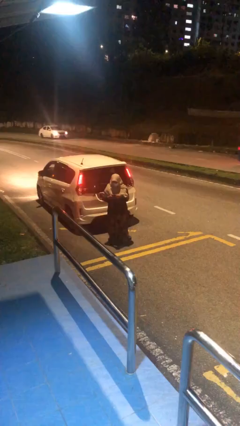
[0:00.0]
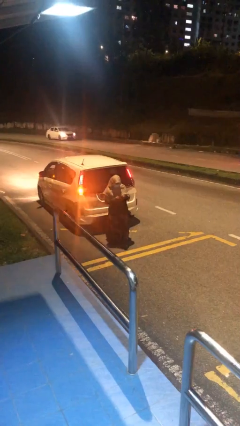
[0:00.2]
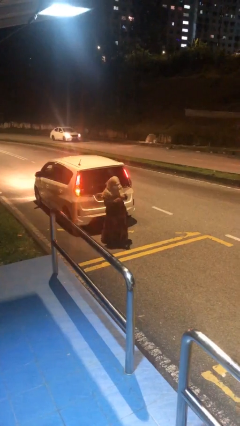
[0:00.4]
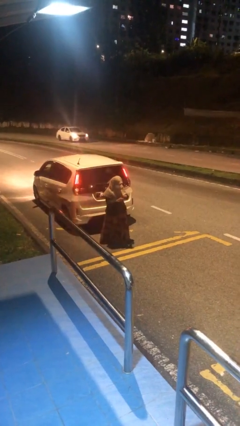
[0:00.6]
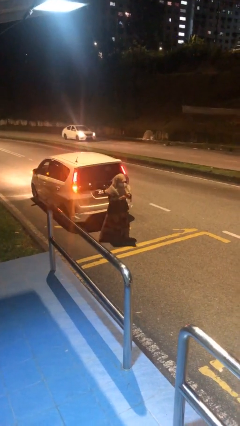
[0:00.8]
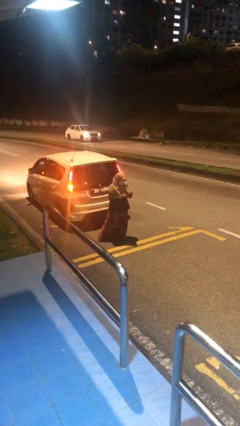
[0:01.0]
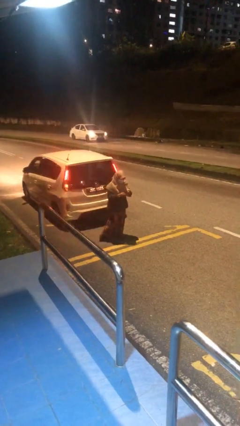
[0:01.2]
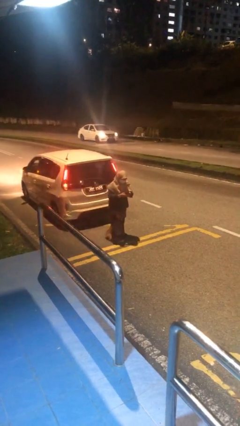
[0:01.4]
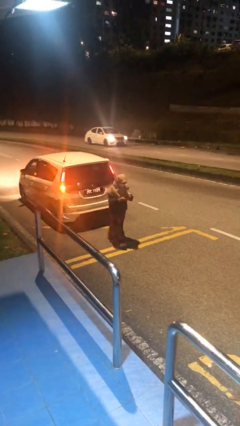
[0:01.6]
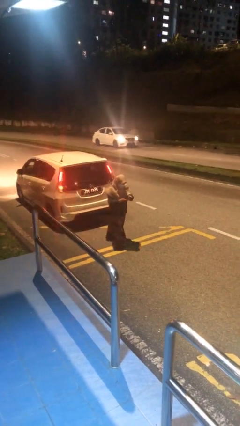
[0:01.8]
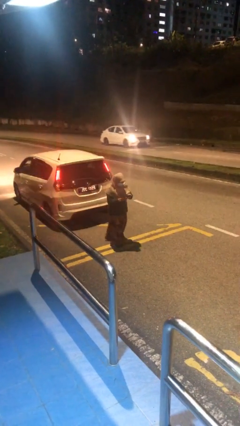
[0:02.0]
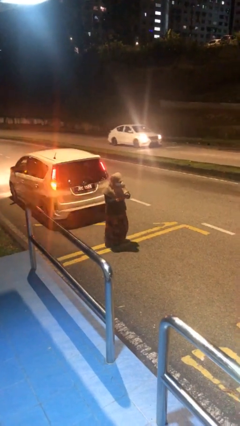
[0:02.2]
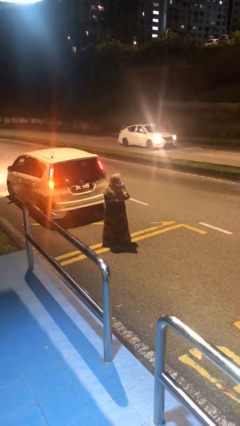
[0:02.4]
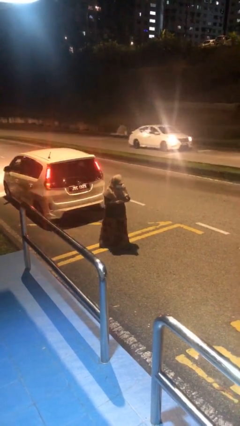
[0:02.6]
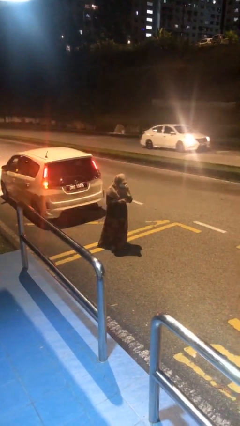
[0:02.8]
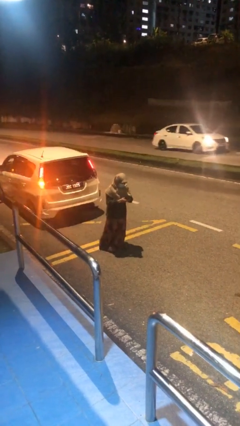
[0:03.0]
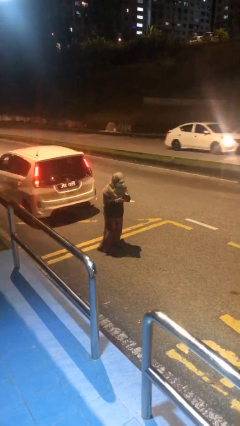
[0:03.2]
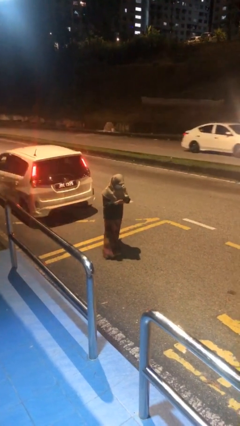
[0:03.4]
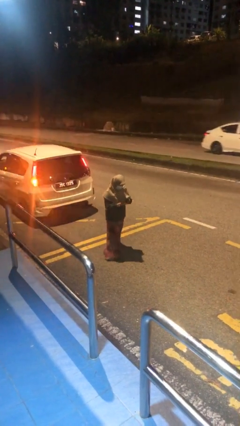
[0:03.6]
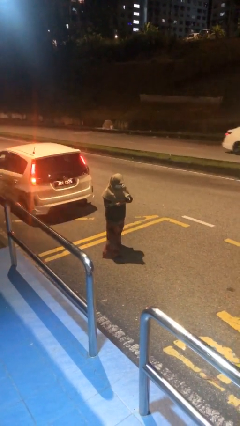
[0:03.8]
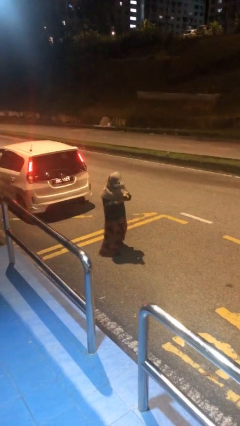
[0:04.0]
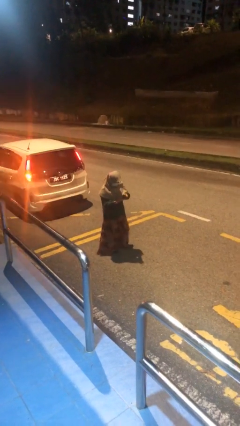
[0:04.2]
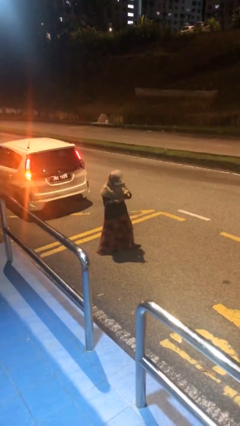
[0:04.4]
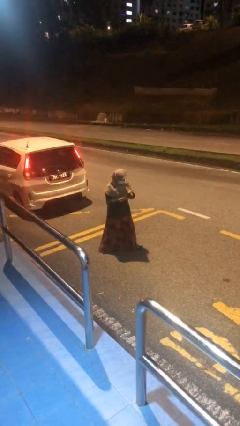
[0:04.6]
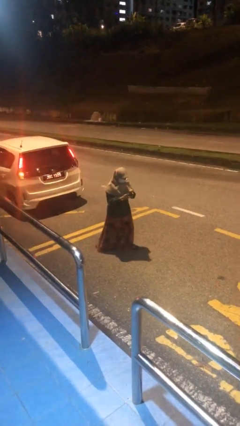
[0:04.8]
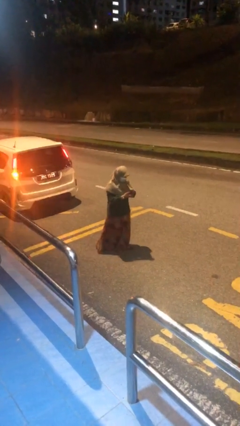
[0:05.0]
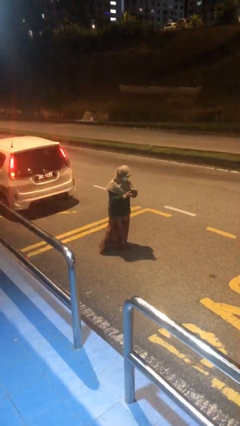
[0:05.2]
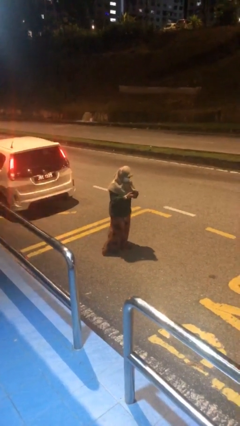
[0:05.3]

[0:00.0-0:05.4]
person texts on phone

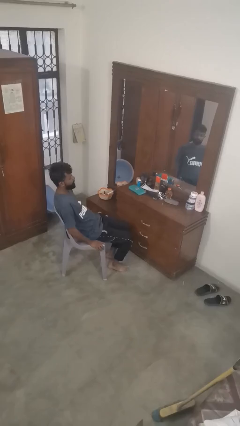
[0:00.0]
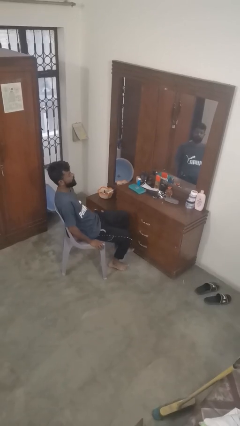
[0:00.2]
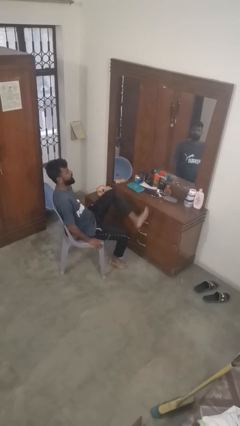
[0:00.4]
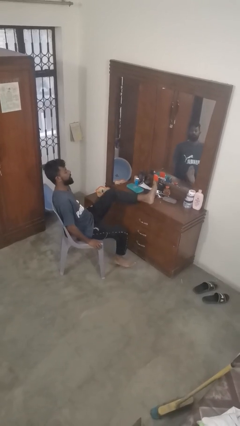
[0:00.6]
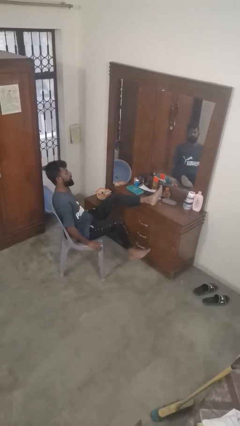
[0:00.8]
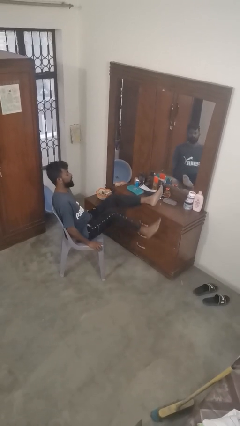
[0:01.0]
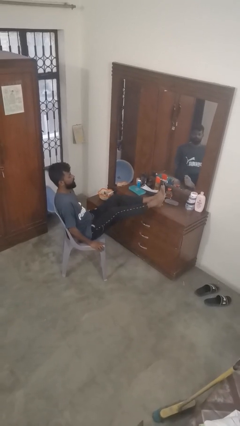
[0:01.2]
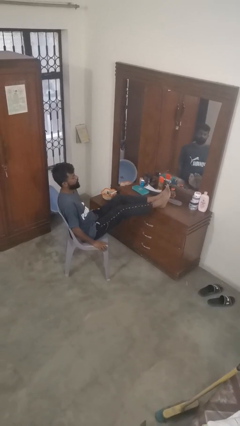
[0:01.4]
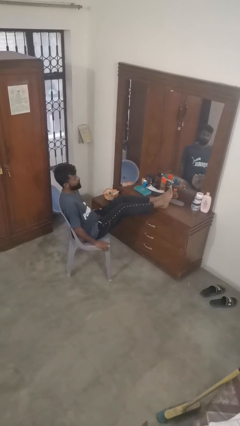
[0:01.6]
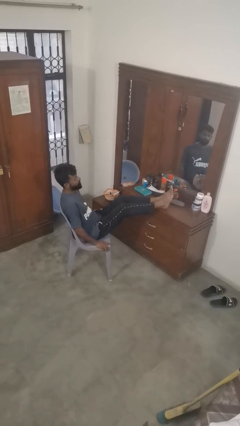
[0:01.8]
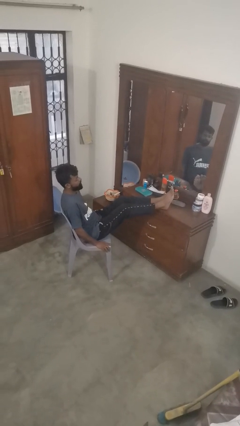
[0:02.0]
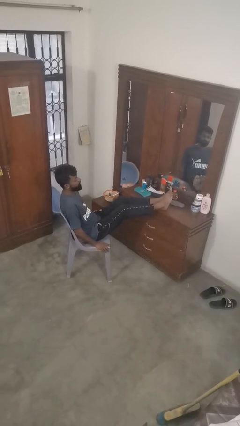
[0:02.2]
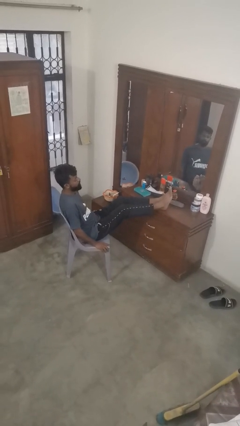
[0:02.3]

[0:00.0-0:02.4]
person puts feet up

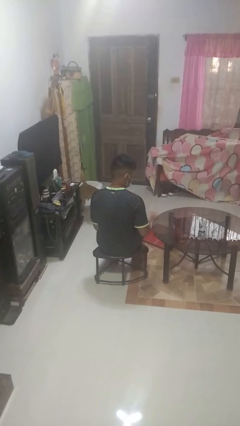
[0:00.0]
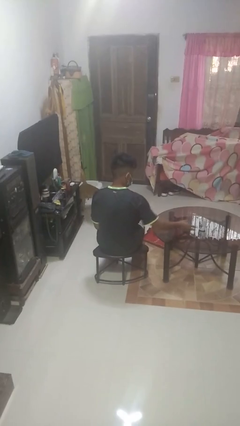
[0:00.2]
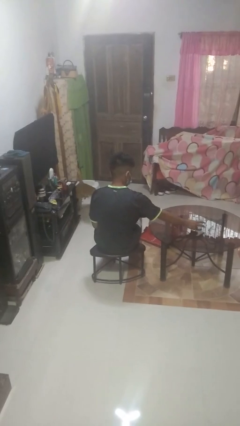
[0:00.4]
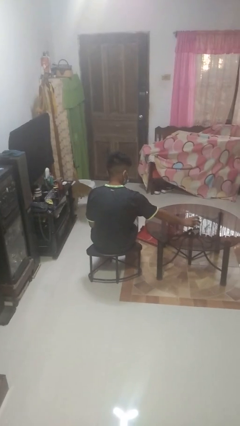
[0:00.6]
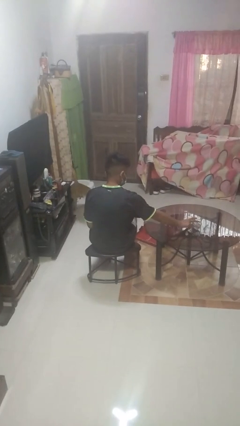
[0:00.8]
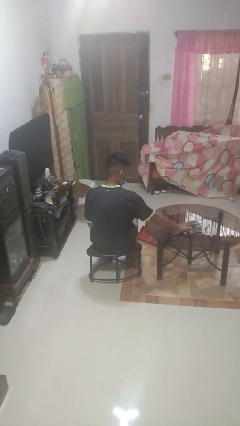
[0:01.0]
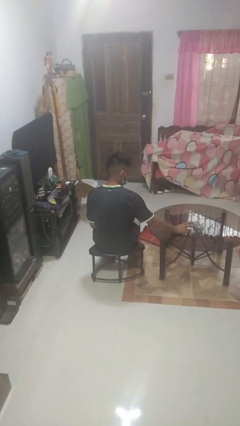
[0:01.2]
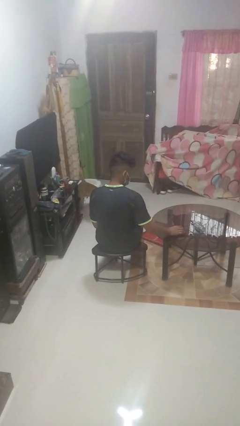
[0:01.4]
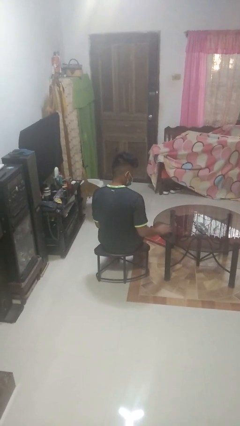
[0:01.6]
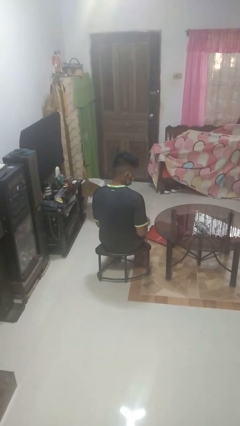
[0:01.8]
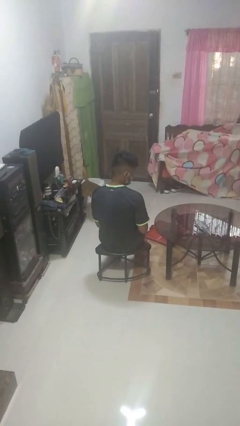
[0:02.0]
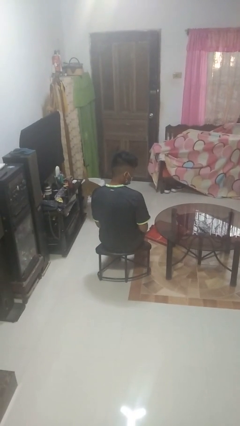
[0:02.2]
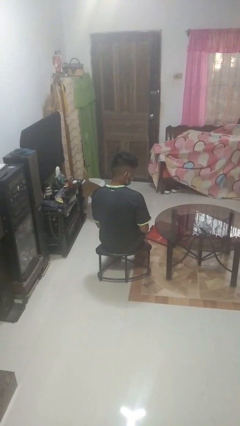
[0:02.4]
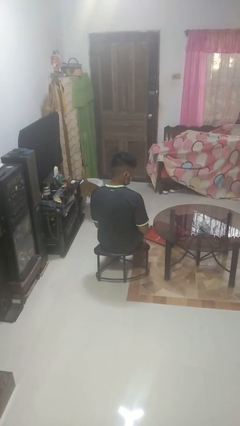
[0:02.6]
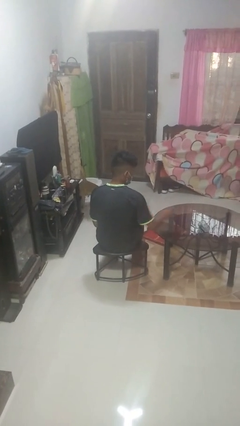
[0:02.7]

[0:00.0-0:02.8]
person spills on table

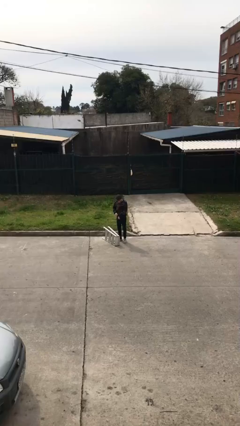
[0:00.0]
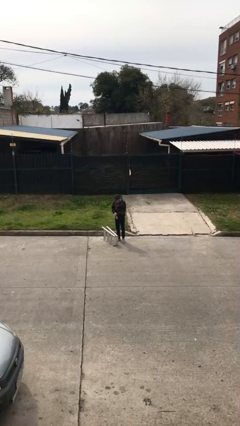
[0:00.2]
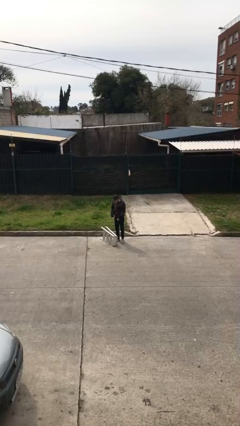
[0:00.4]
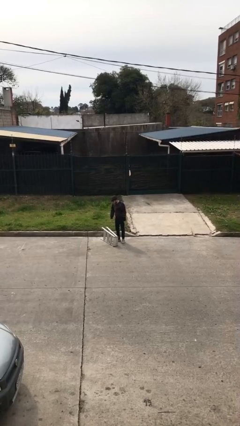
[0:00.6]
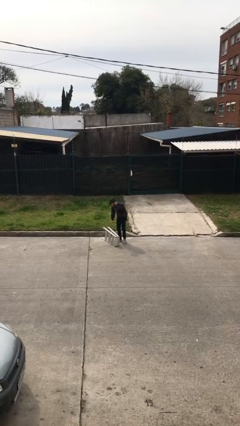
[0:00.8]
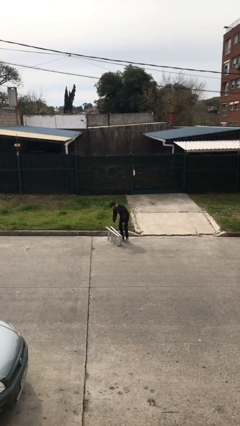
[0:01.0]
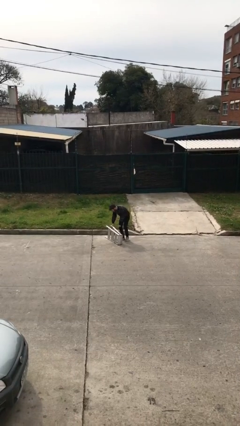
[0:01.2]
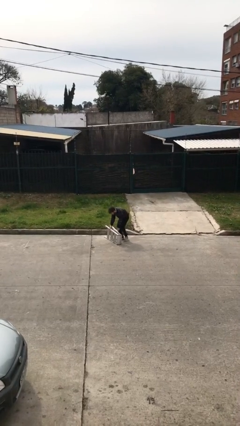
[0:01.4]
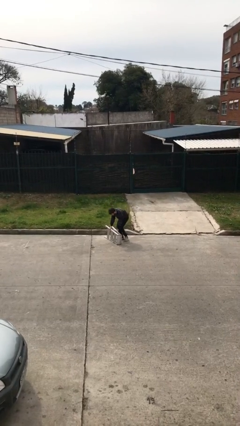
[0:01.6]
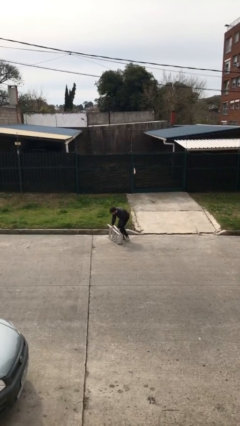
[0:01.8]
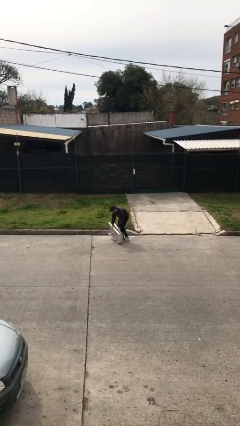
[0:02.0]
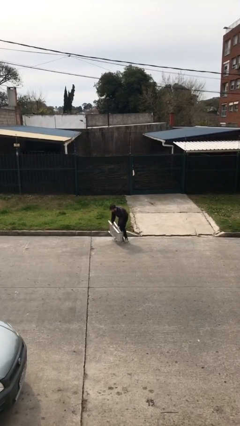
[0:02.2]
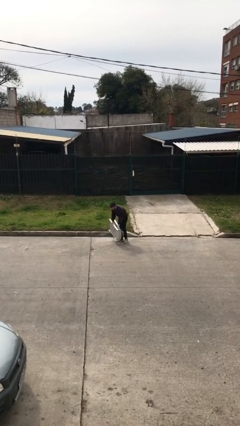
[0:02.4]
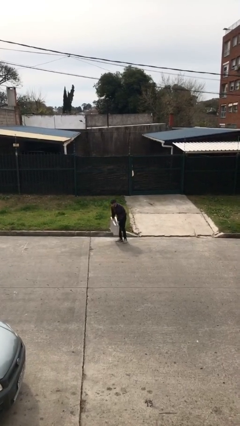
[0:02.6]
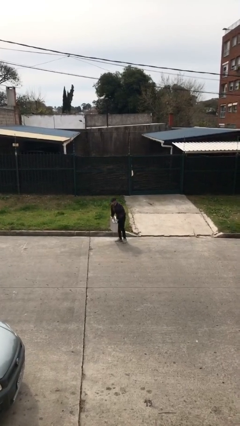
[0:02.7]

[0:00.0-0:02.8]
person picks up object from floor

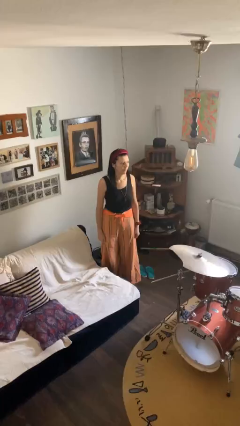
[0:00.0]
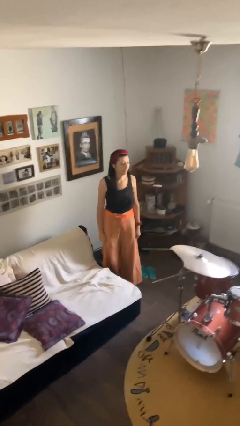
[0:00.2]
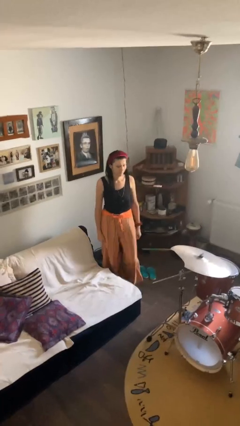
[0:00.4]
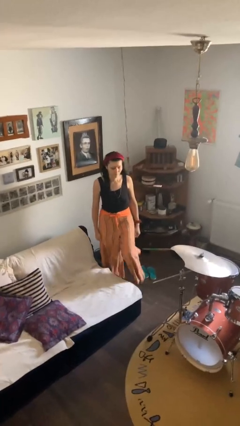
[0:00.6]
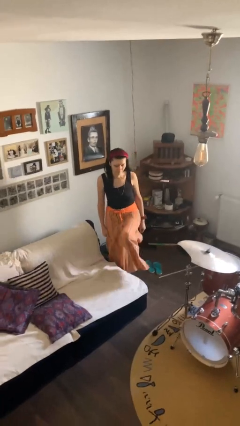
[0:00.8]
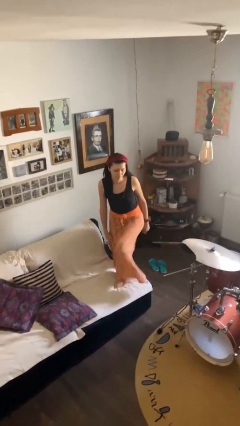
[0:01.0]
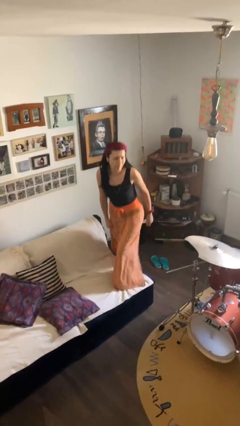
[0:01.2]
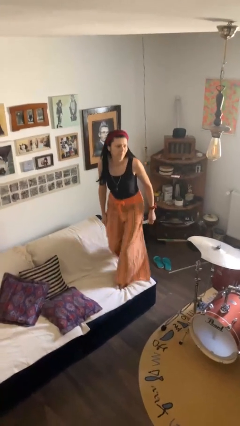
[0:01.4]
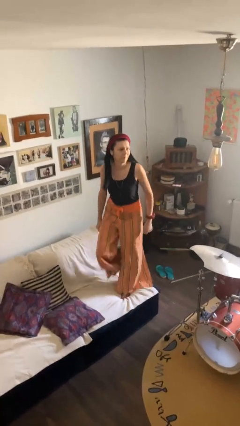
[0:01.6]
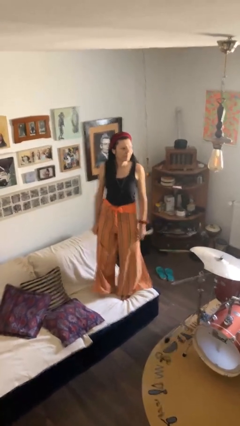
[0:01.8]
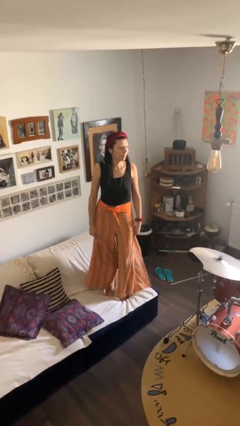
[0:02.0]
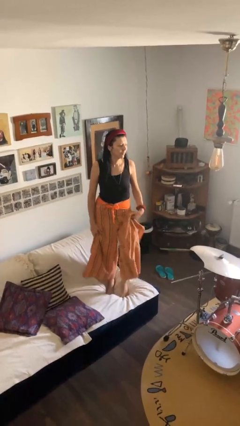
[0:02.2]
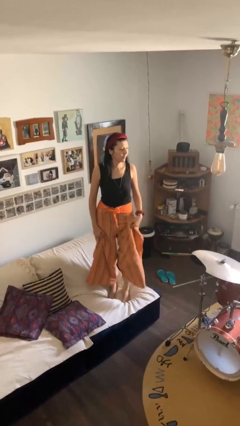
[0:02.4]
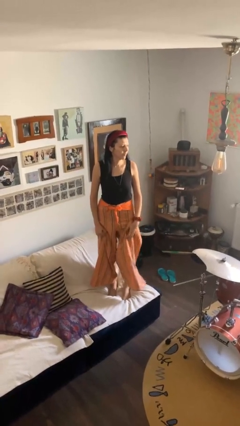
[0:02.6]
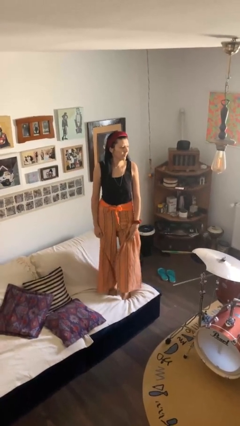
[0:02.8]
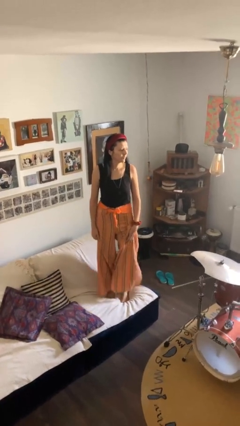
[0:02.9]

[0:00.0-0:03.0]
person climbs on couch

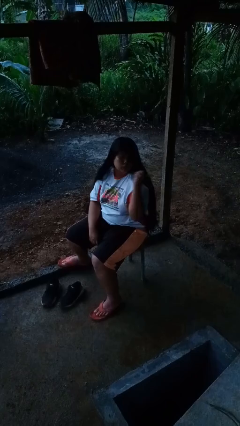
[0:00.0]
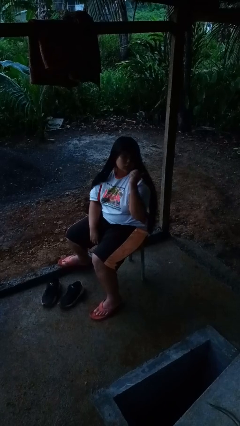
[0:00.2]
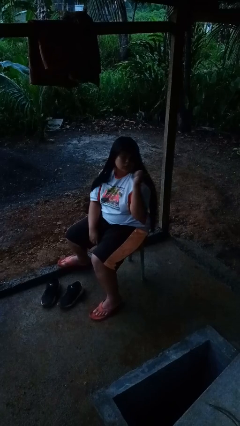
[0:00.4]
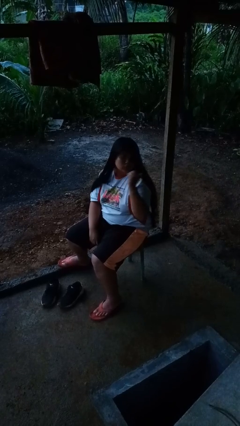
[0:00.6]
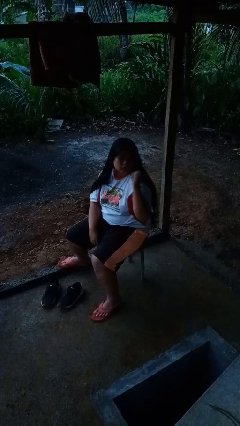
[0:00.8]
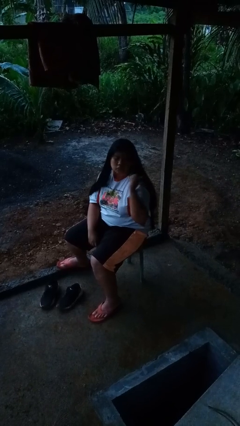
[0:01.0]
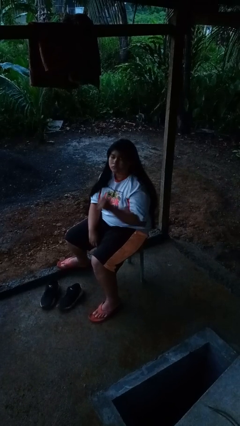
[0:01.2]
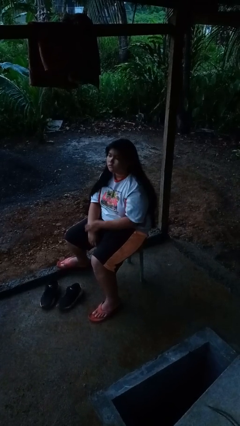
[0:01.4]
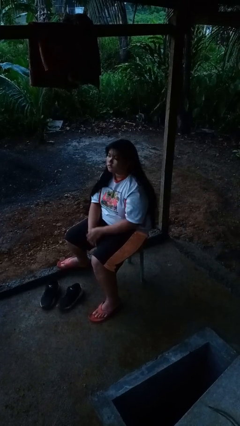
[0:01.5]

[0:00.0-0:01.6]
person gestures behind me
